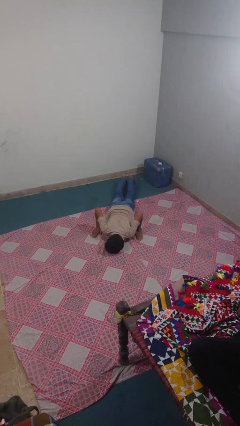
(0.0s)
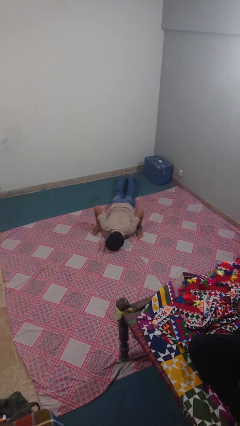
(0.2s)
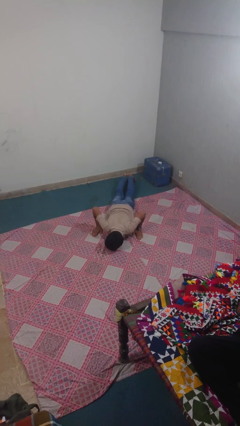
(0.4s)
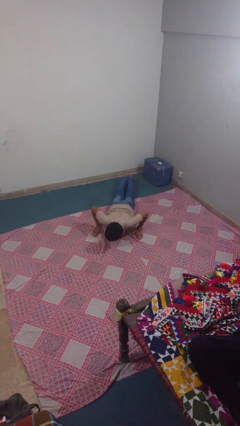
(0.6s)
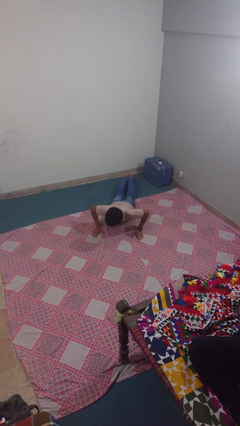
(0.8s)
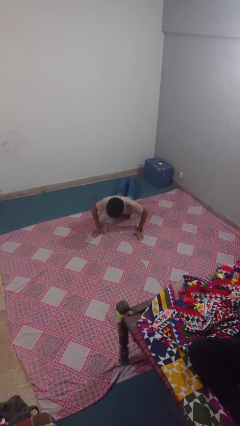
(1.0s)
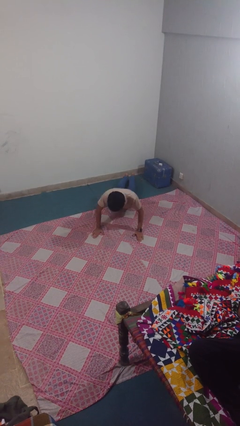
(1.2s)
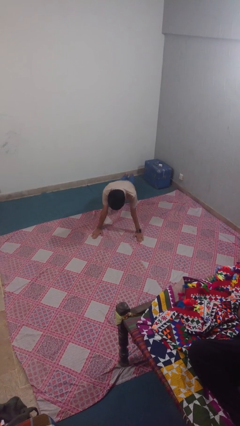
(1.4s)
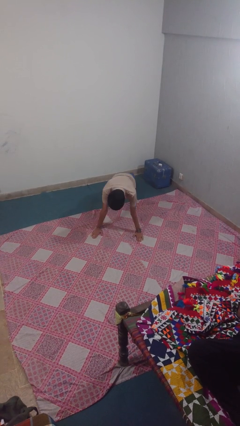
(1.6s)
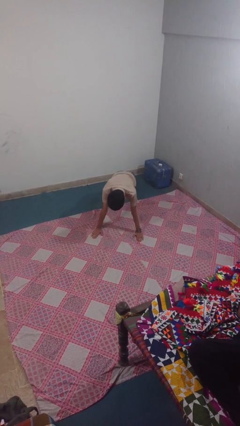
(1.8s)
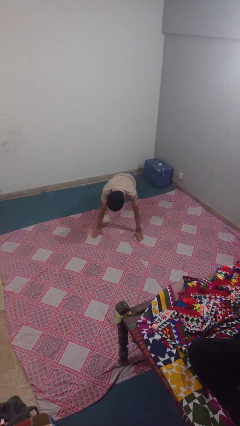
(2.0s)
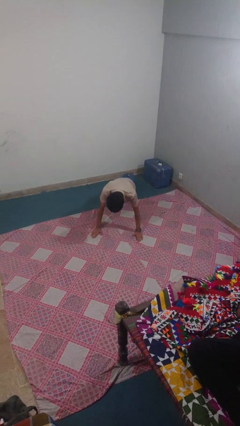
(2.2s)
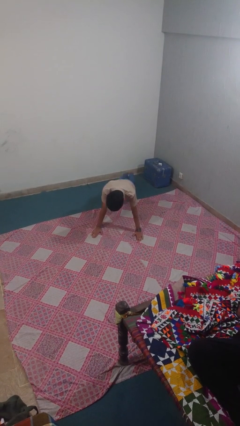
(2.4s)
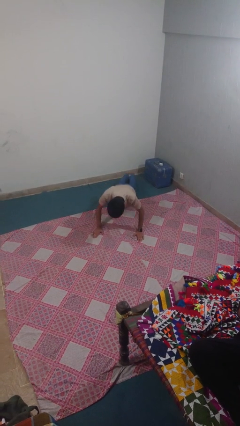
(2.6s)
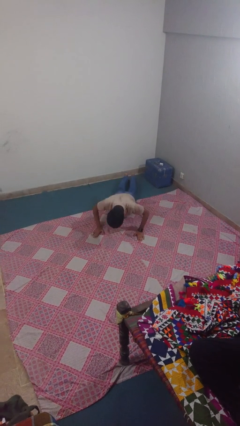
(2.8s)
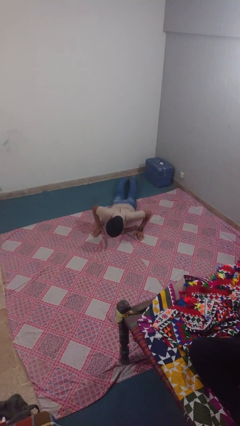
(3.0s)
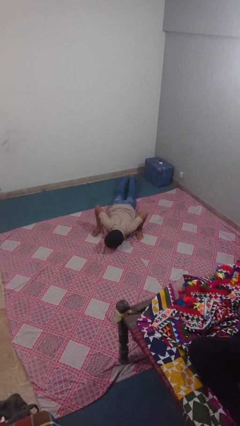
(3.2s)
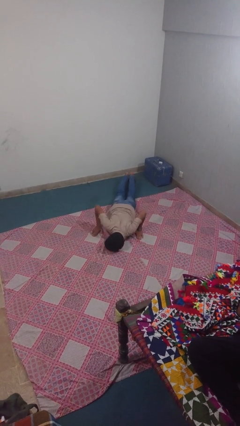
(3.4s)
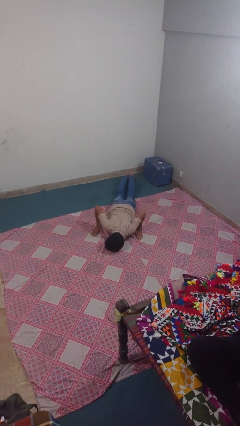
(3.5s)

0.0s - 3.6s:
person exercises with pushup

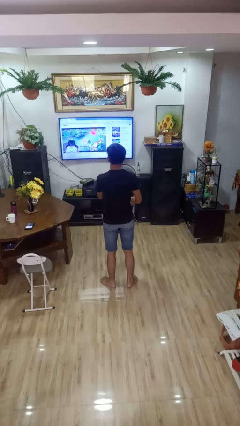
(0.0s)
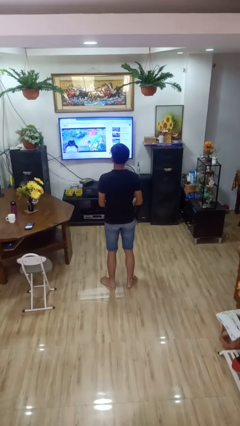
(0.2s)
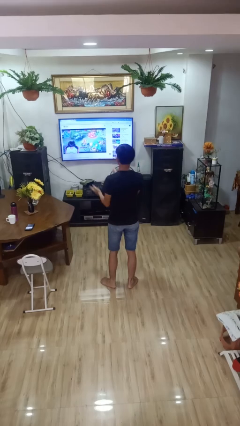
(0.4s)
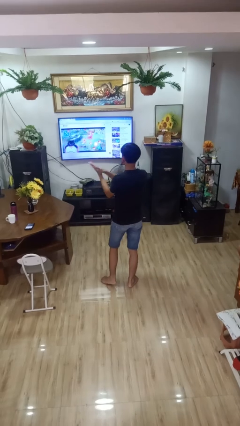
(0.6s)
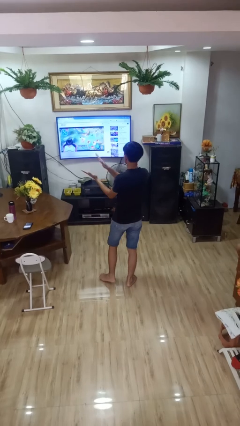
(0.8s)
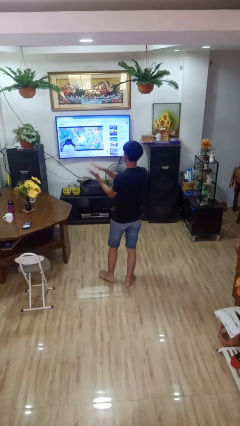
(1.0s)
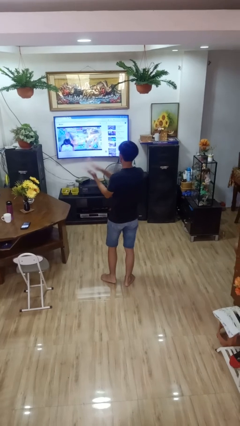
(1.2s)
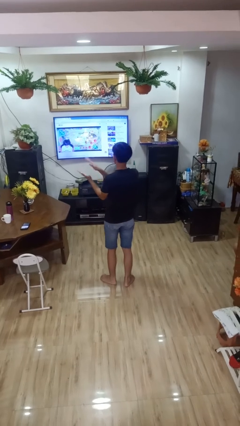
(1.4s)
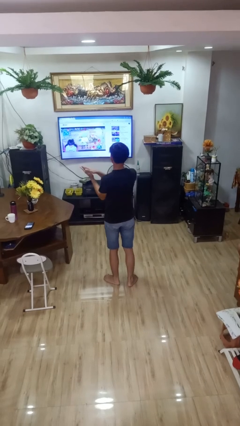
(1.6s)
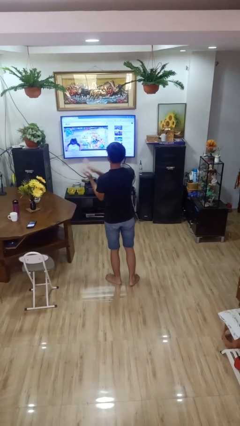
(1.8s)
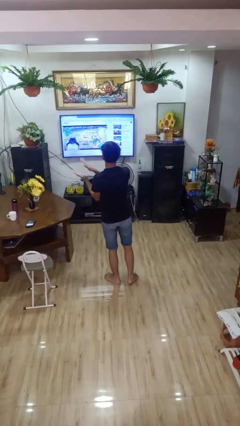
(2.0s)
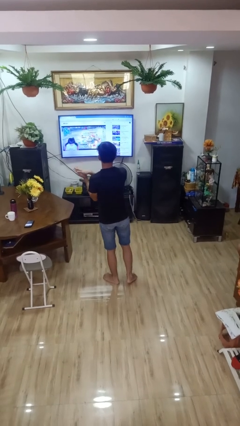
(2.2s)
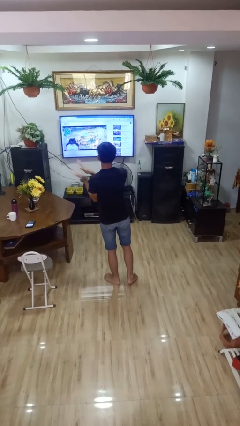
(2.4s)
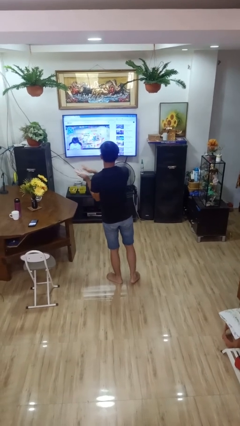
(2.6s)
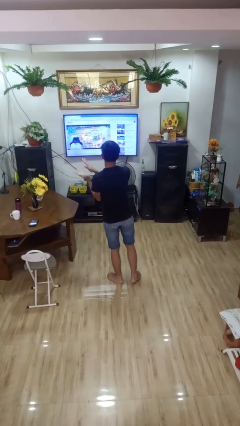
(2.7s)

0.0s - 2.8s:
person claps hands

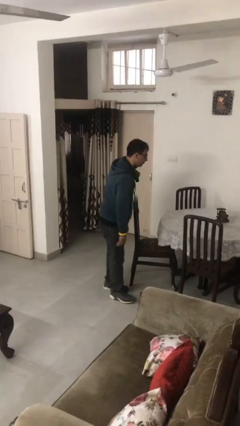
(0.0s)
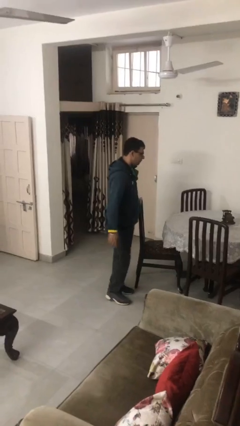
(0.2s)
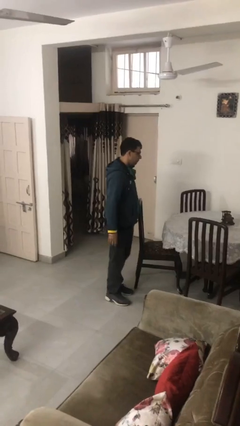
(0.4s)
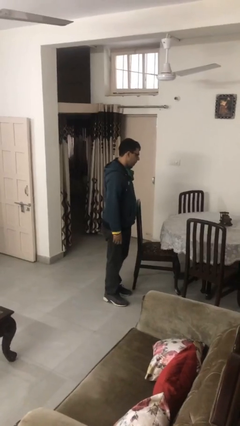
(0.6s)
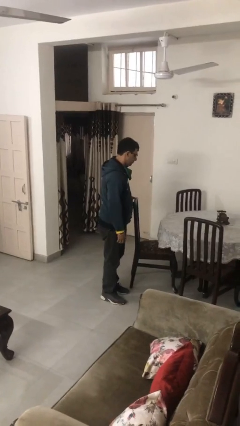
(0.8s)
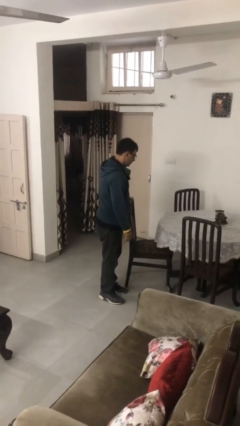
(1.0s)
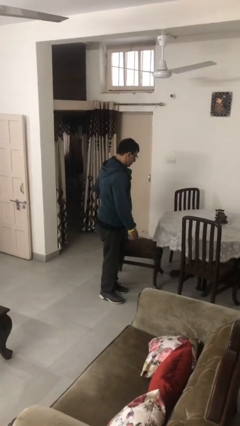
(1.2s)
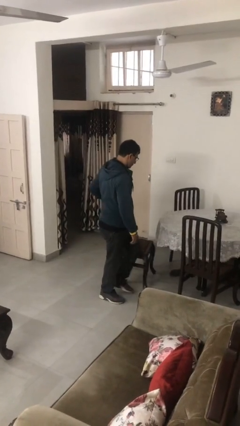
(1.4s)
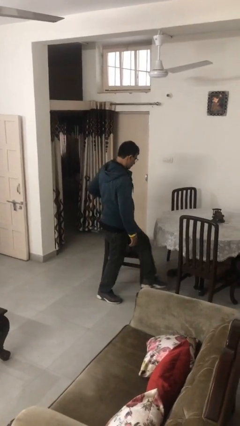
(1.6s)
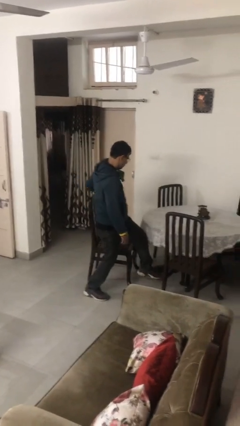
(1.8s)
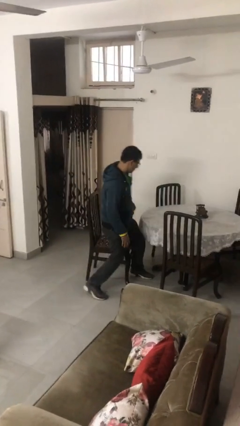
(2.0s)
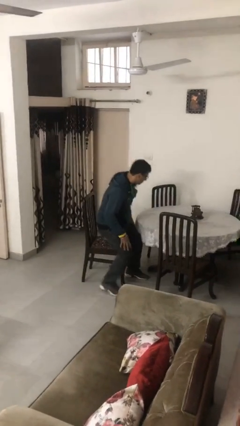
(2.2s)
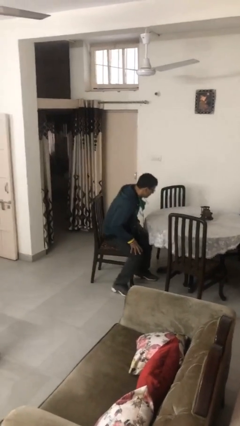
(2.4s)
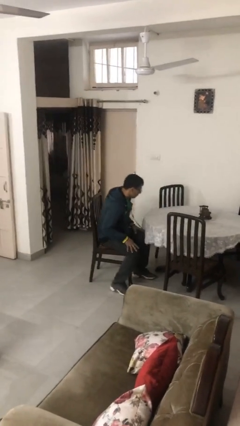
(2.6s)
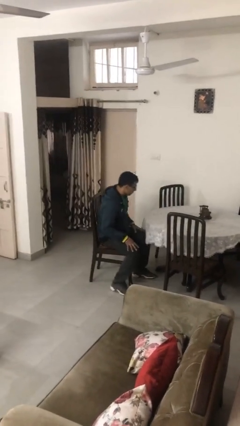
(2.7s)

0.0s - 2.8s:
person sits down

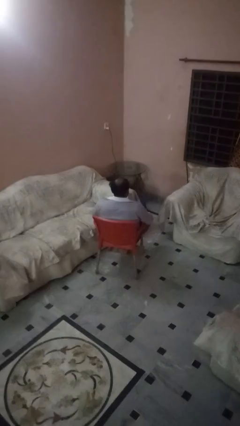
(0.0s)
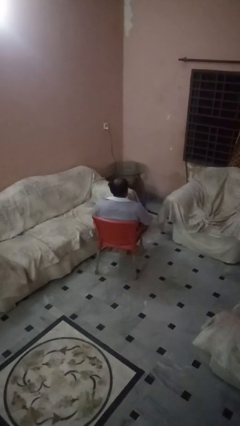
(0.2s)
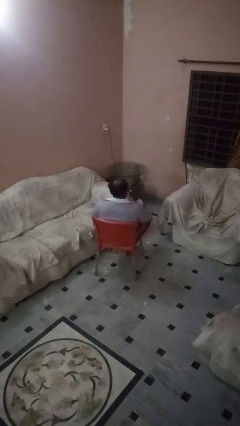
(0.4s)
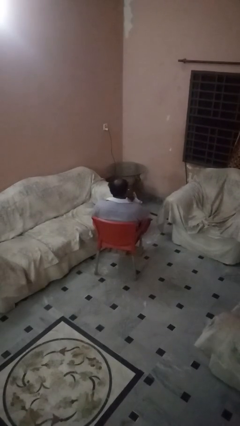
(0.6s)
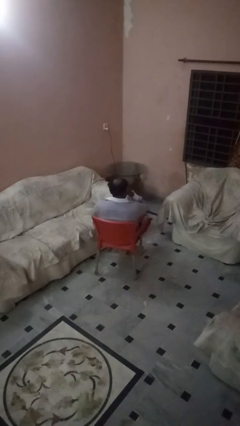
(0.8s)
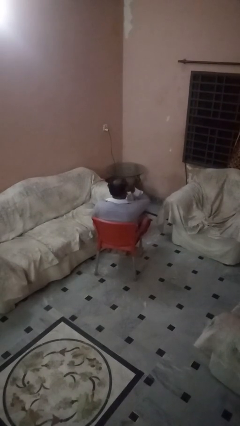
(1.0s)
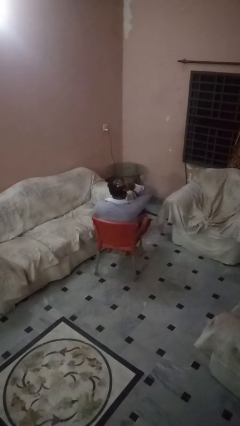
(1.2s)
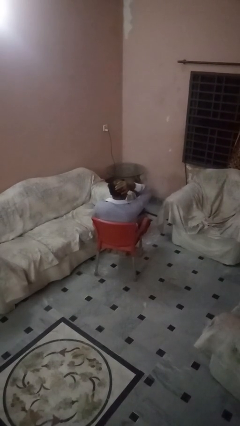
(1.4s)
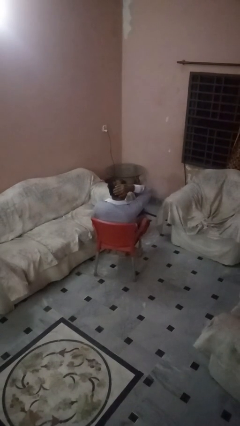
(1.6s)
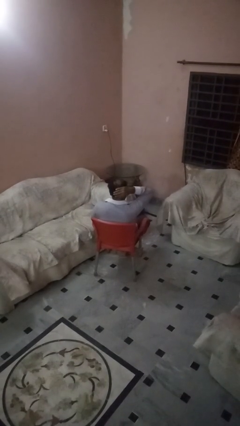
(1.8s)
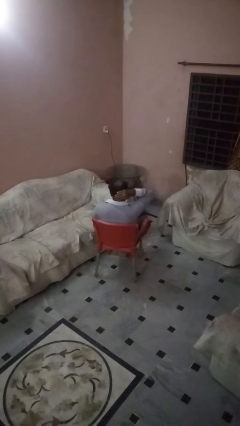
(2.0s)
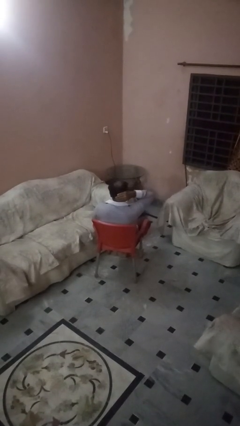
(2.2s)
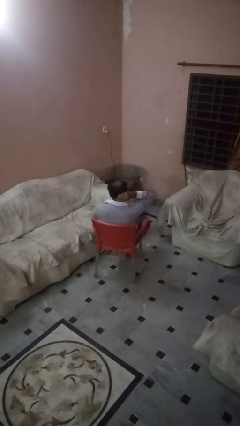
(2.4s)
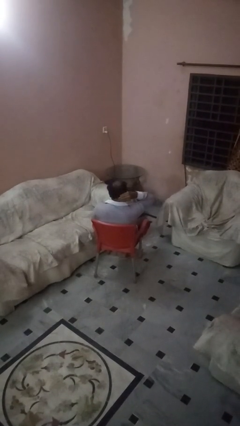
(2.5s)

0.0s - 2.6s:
person strokes hair

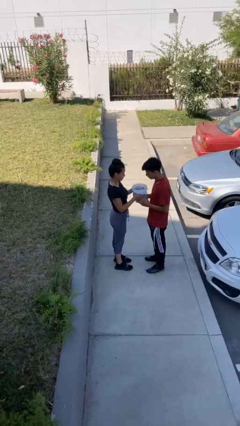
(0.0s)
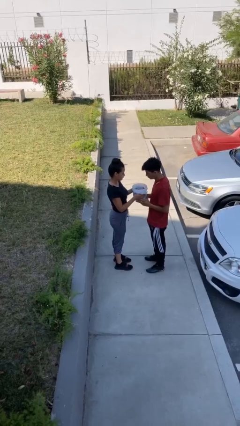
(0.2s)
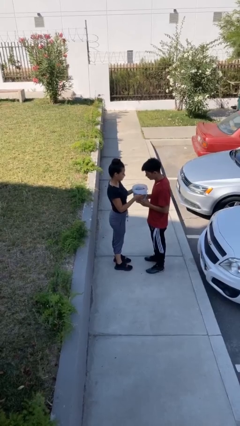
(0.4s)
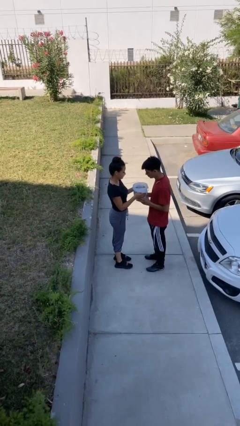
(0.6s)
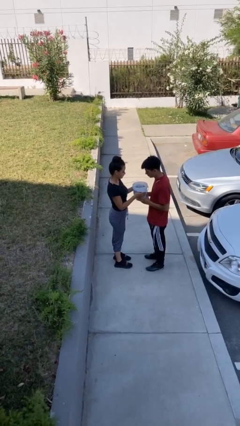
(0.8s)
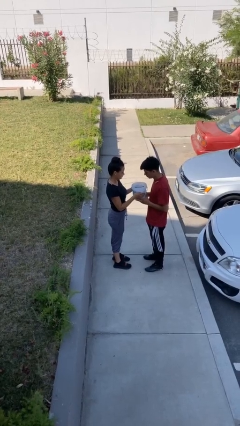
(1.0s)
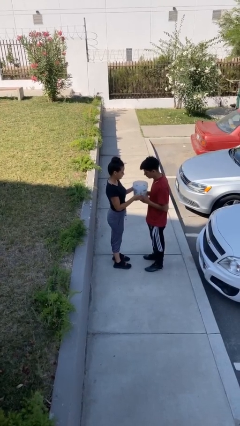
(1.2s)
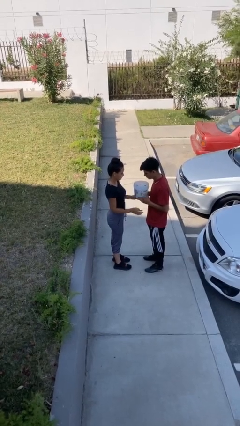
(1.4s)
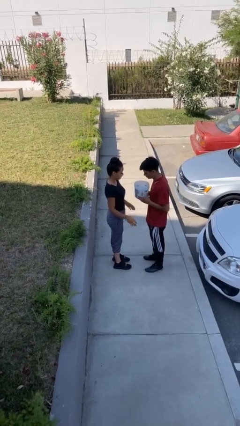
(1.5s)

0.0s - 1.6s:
person transfers object to person

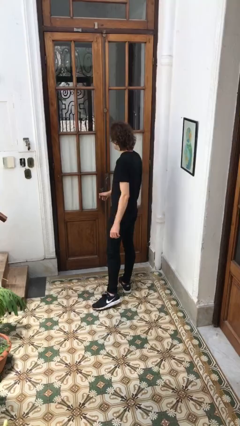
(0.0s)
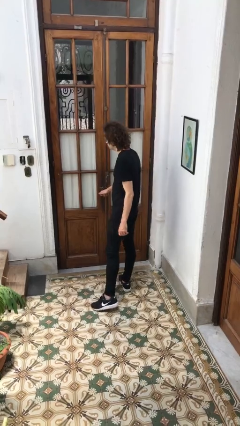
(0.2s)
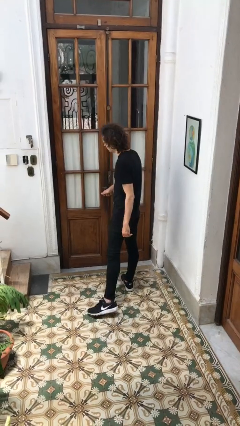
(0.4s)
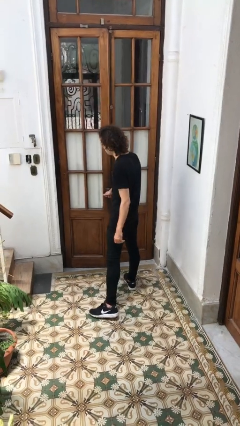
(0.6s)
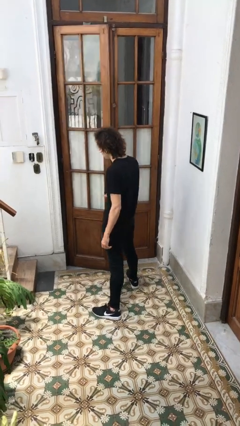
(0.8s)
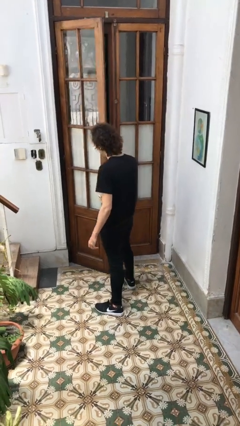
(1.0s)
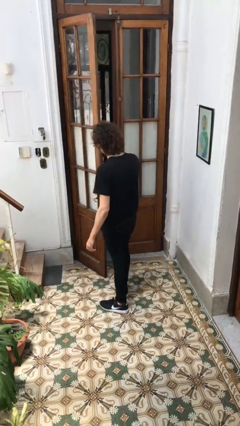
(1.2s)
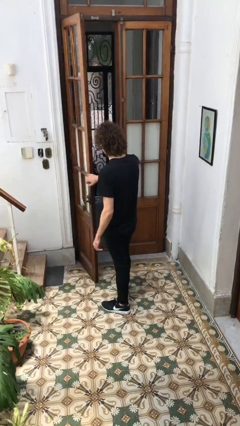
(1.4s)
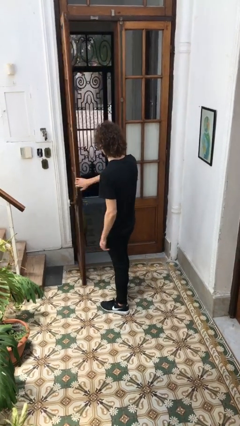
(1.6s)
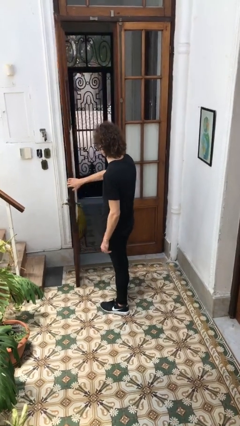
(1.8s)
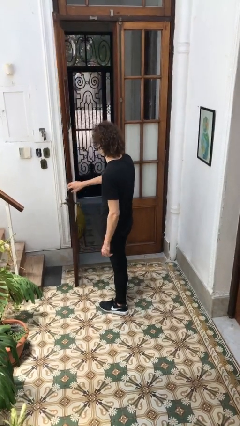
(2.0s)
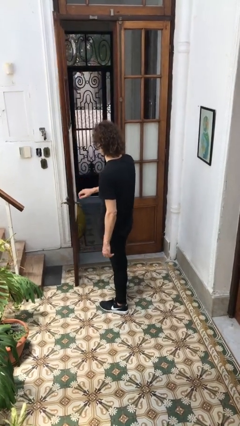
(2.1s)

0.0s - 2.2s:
person opens facility door

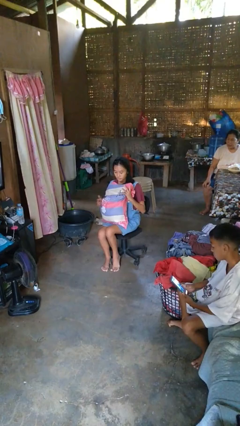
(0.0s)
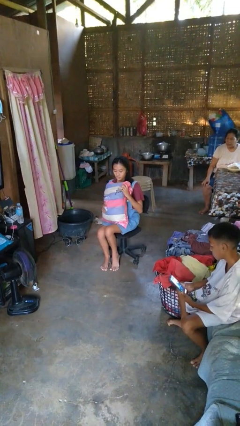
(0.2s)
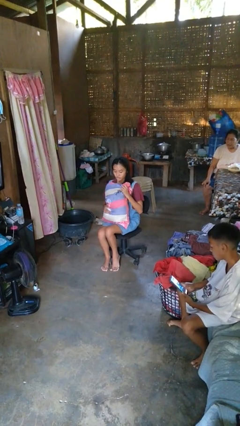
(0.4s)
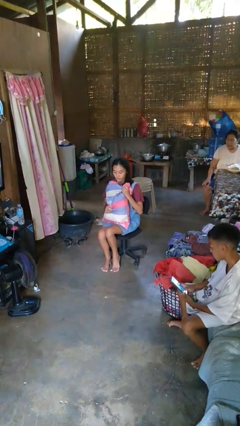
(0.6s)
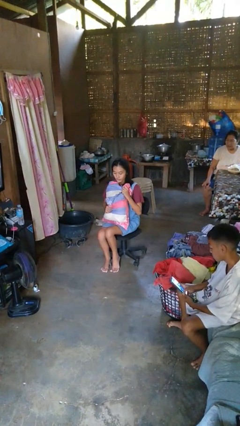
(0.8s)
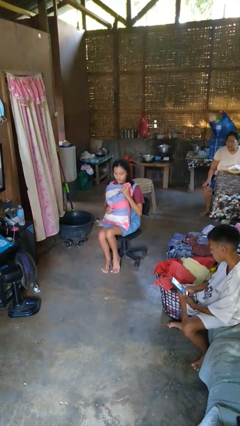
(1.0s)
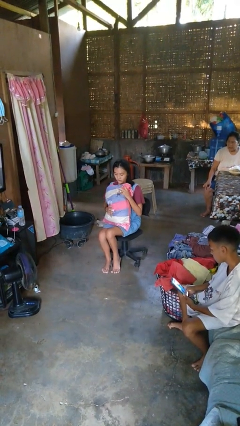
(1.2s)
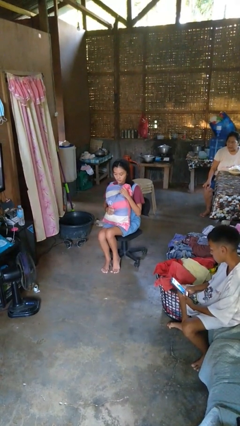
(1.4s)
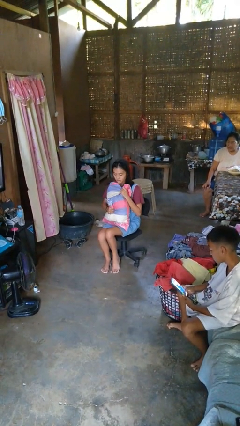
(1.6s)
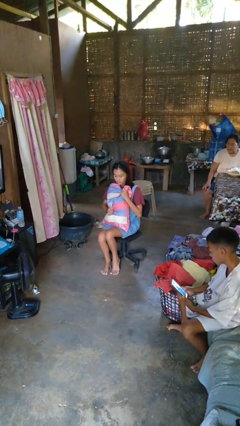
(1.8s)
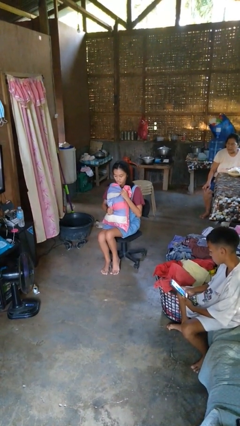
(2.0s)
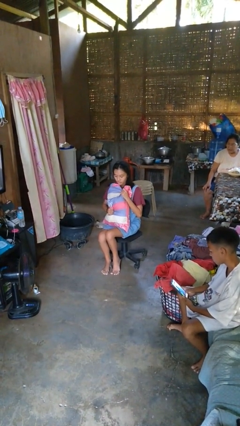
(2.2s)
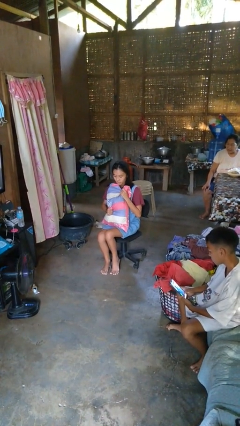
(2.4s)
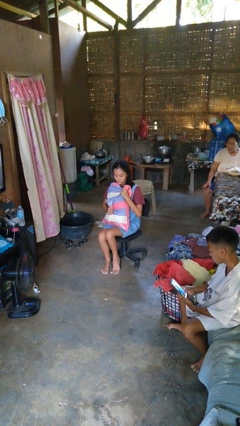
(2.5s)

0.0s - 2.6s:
person squeezes object
